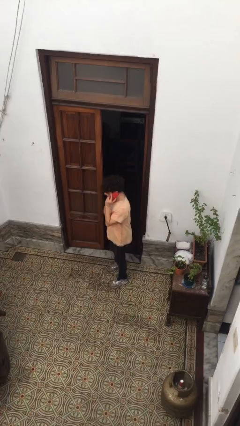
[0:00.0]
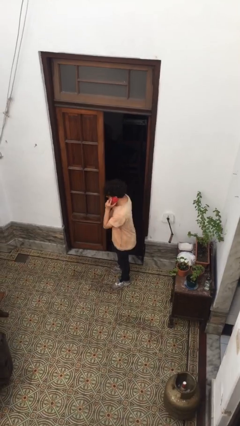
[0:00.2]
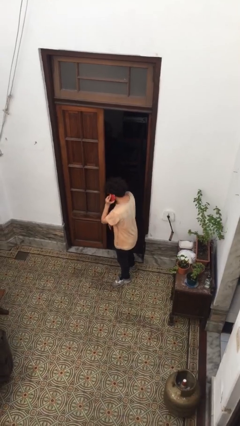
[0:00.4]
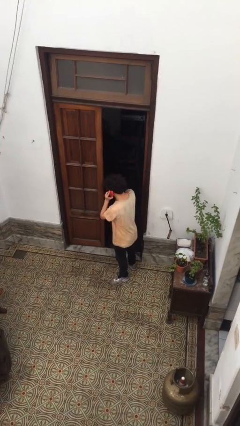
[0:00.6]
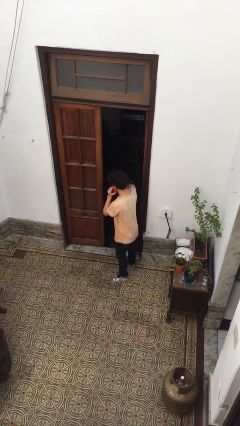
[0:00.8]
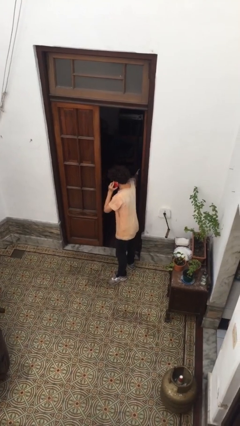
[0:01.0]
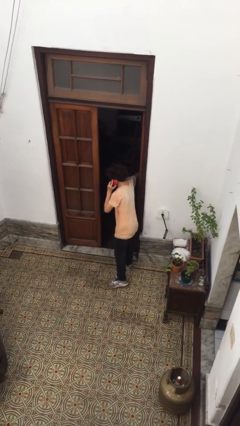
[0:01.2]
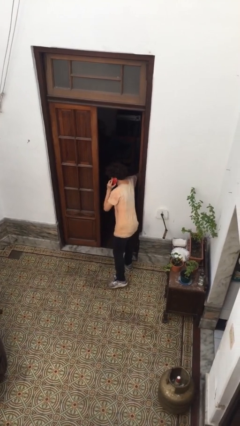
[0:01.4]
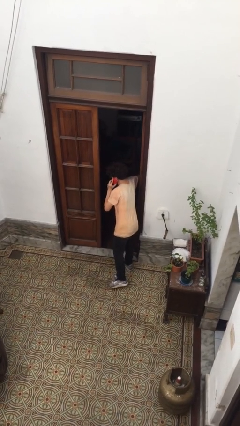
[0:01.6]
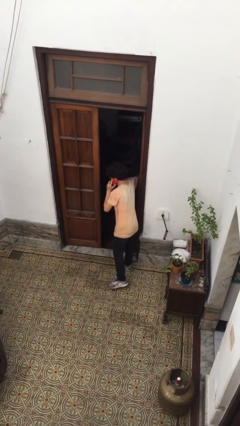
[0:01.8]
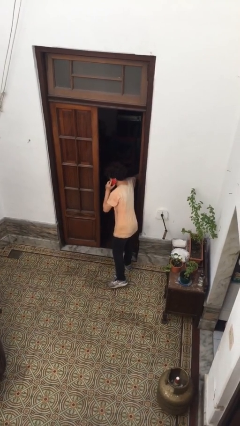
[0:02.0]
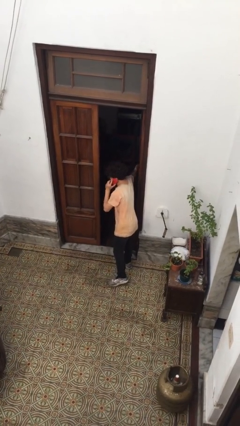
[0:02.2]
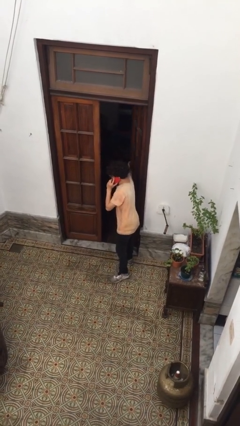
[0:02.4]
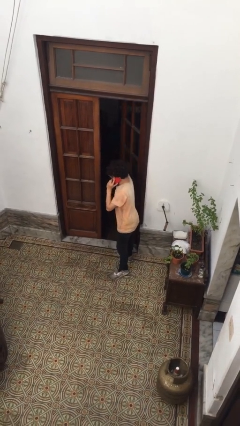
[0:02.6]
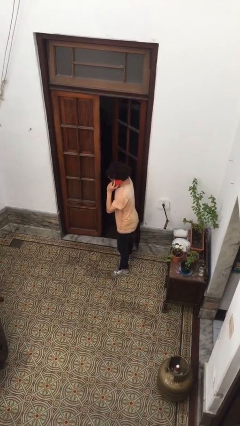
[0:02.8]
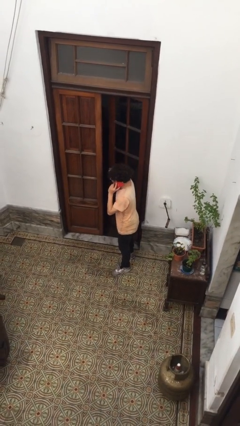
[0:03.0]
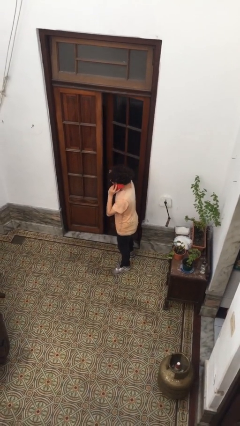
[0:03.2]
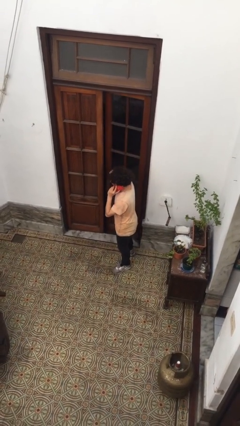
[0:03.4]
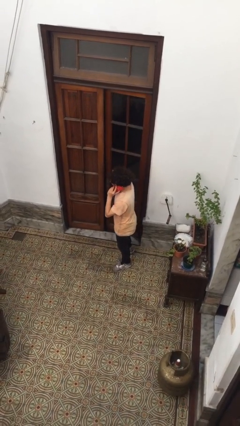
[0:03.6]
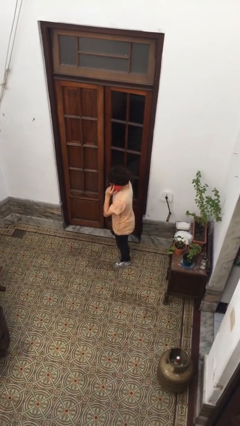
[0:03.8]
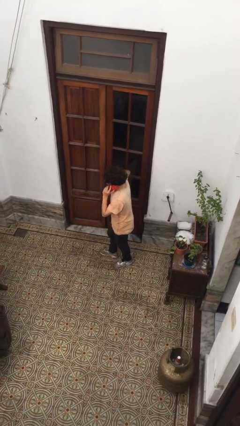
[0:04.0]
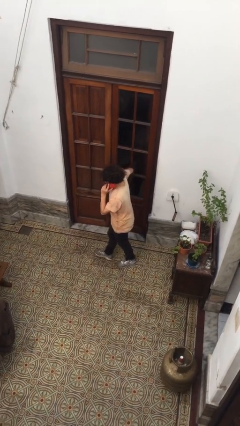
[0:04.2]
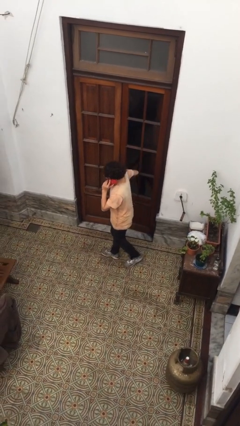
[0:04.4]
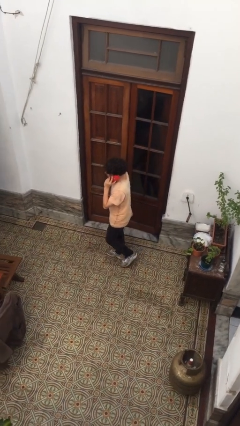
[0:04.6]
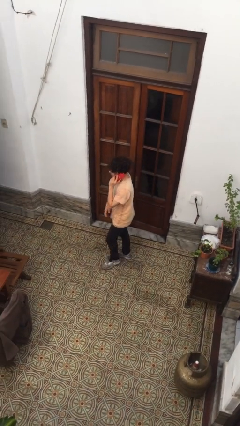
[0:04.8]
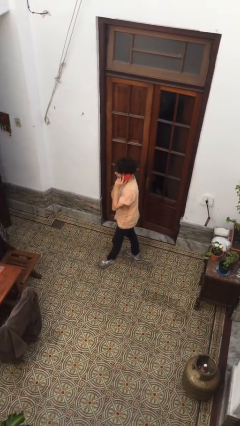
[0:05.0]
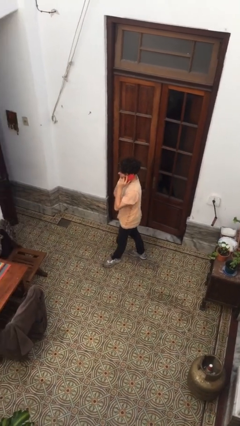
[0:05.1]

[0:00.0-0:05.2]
person closes facility door

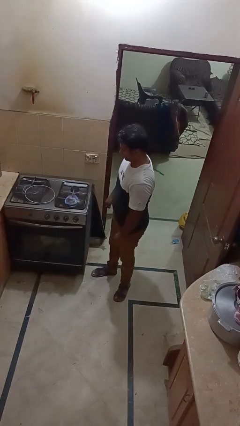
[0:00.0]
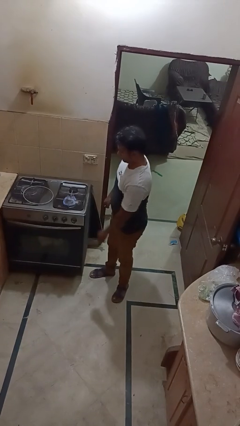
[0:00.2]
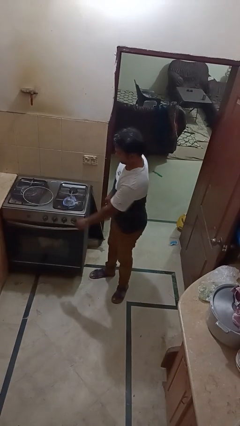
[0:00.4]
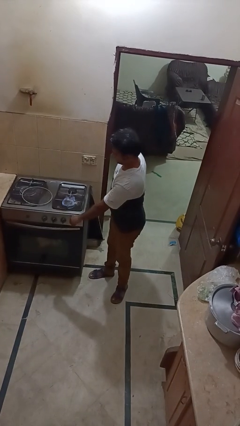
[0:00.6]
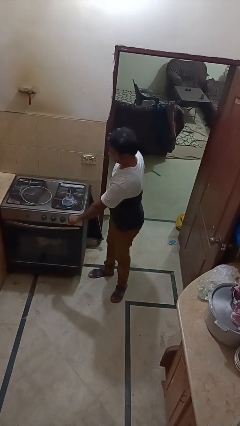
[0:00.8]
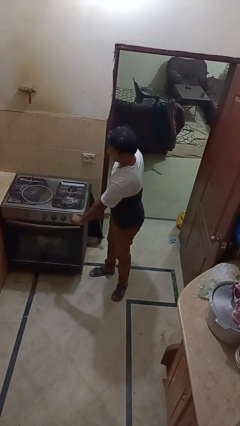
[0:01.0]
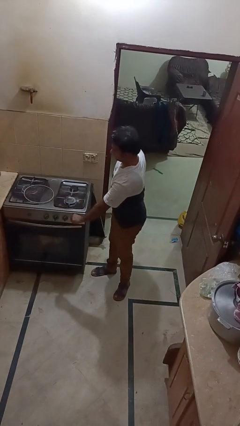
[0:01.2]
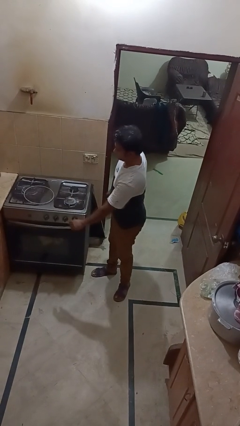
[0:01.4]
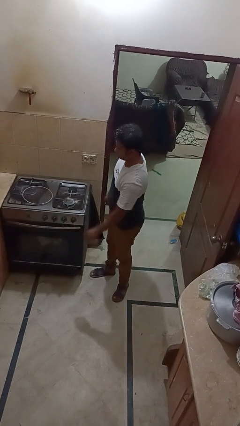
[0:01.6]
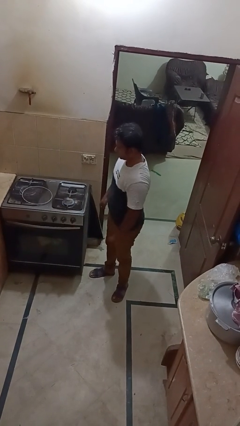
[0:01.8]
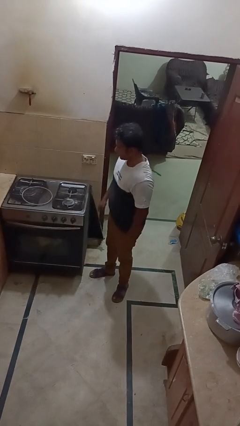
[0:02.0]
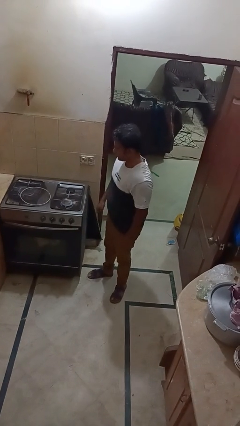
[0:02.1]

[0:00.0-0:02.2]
person turns off stovetop

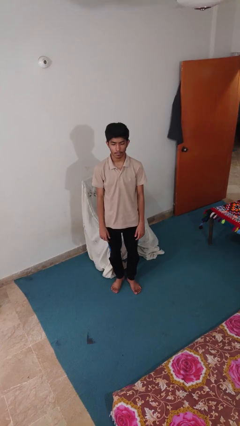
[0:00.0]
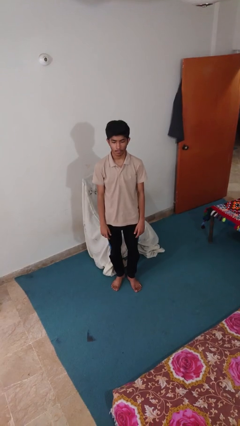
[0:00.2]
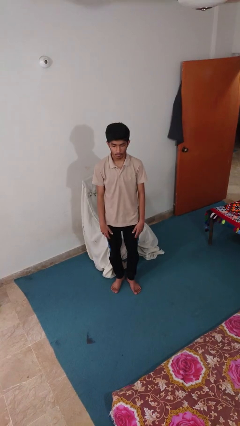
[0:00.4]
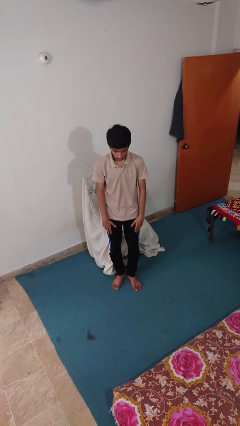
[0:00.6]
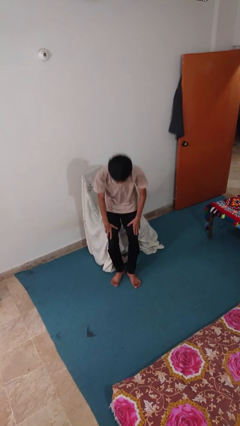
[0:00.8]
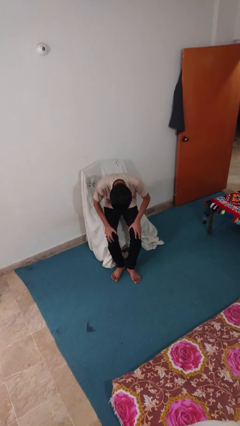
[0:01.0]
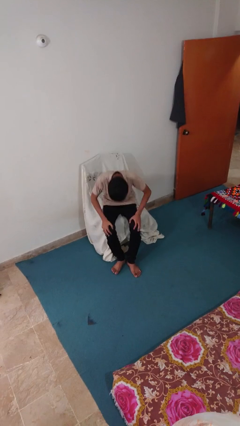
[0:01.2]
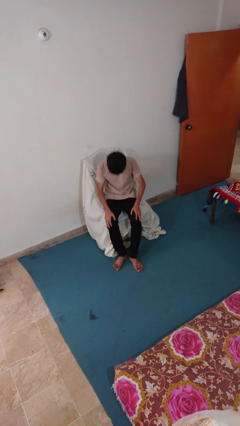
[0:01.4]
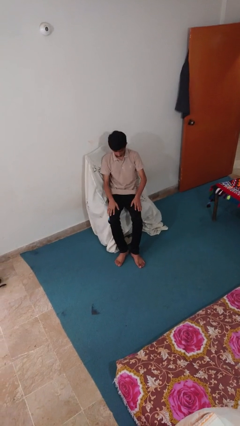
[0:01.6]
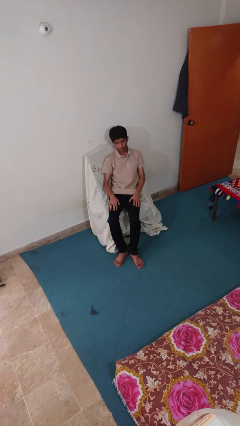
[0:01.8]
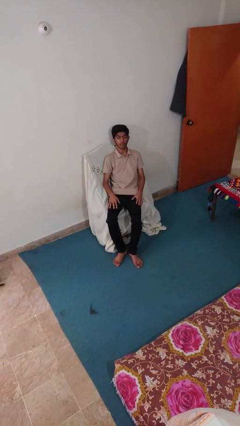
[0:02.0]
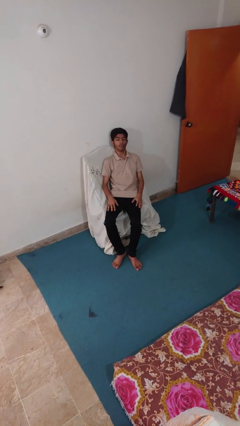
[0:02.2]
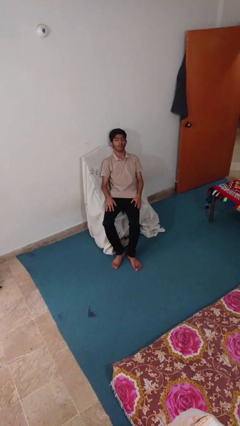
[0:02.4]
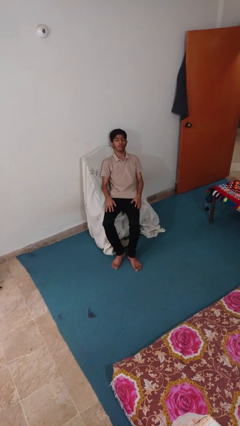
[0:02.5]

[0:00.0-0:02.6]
person lies down on couch

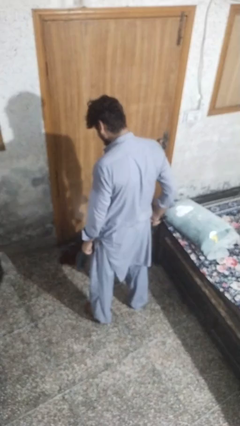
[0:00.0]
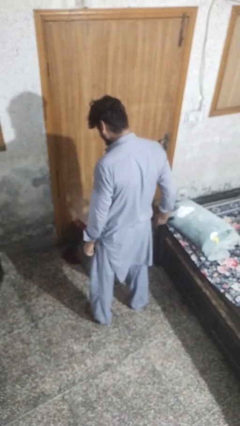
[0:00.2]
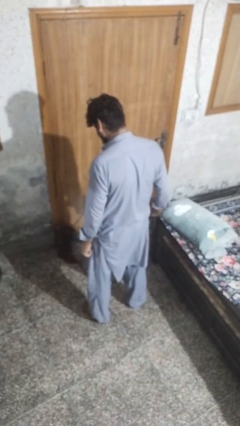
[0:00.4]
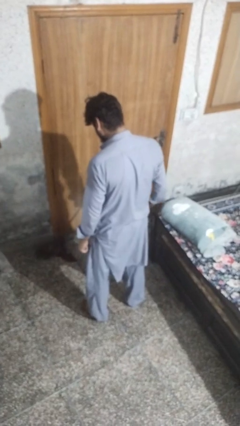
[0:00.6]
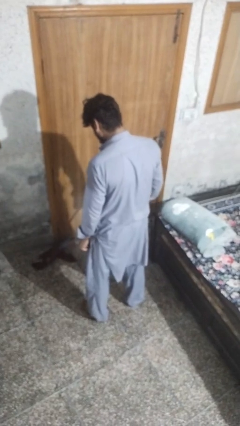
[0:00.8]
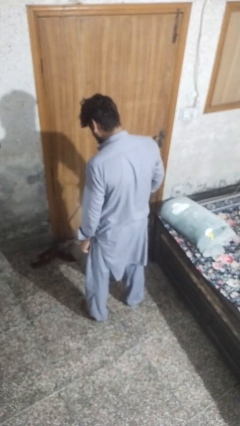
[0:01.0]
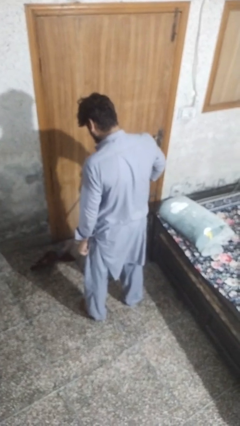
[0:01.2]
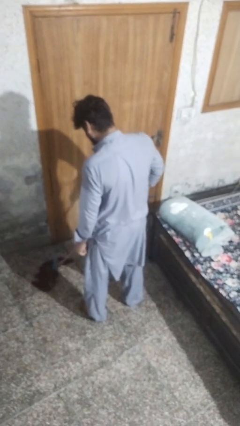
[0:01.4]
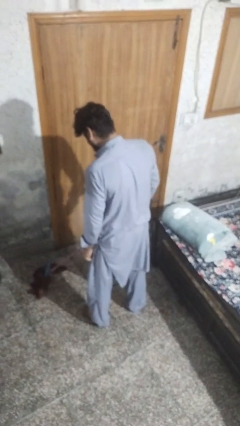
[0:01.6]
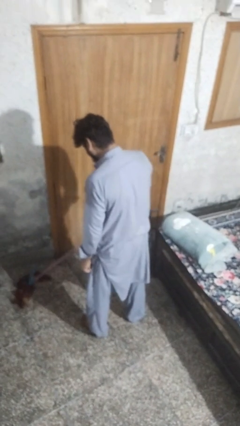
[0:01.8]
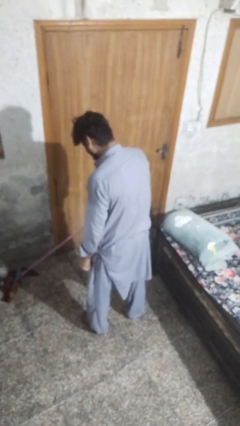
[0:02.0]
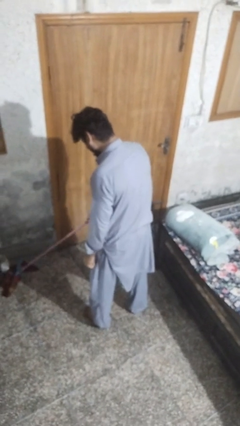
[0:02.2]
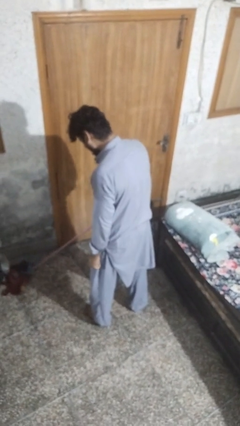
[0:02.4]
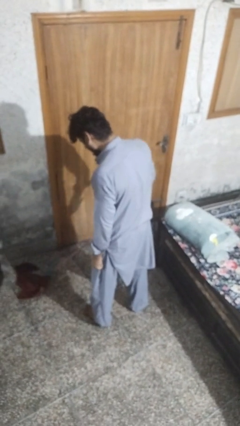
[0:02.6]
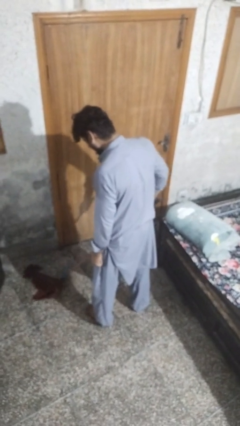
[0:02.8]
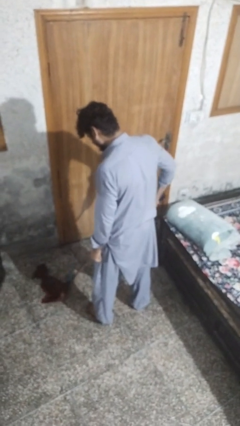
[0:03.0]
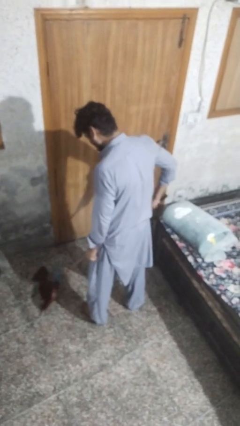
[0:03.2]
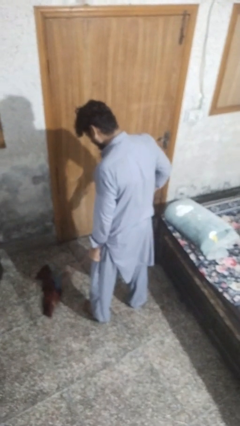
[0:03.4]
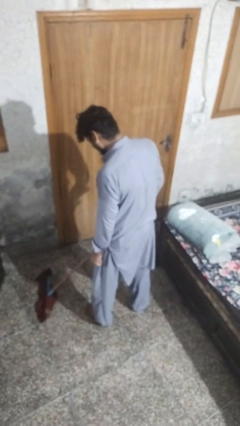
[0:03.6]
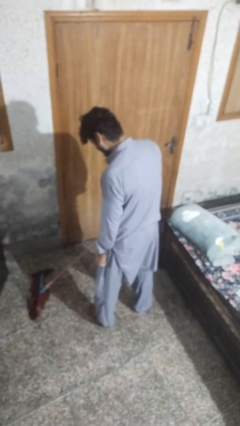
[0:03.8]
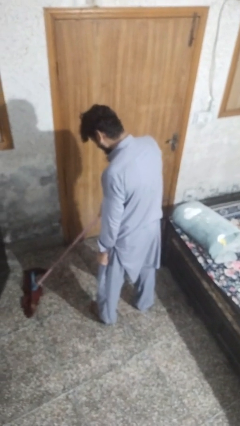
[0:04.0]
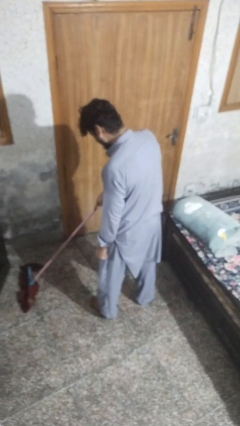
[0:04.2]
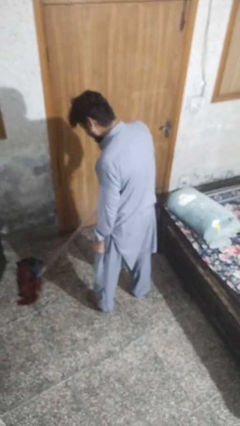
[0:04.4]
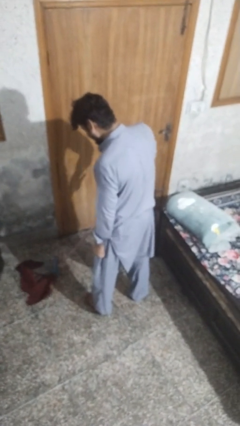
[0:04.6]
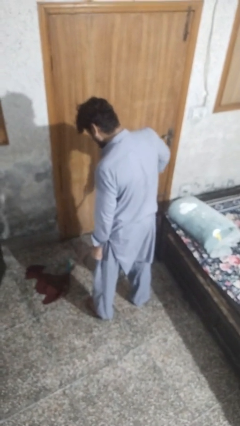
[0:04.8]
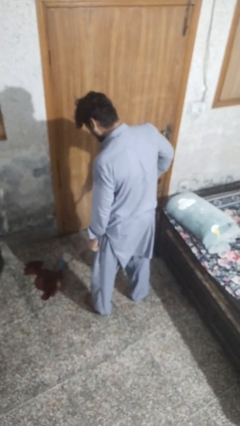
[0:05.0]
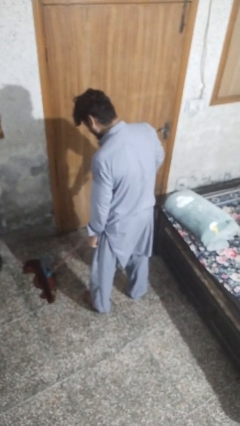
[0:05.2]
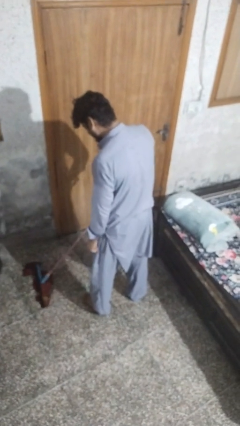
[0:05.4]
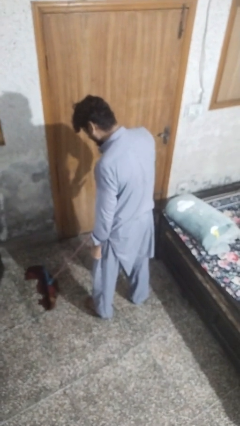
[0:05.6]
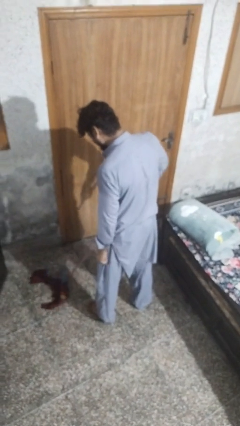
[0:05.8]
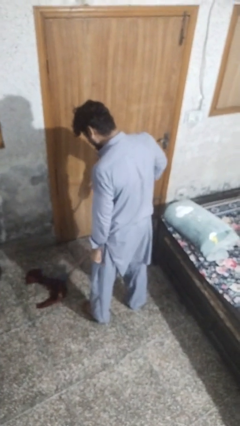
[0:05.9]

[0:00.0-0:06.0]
person mops

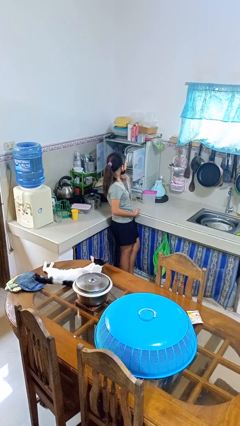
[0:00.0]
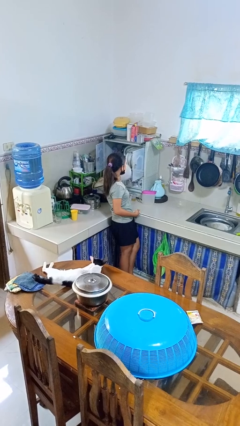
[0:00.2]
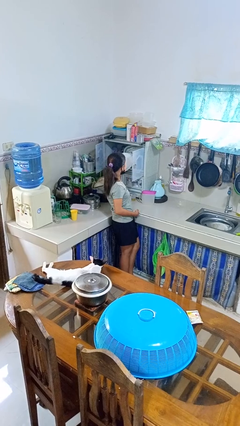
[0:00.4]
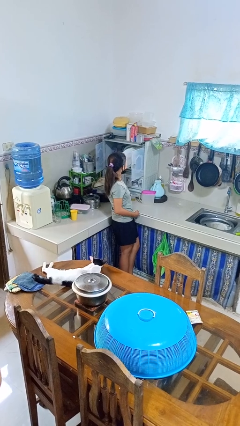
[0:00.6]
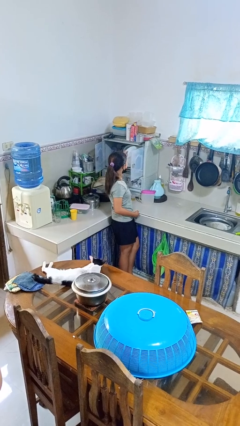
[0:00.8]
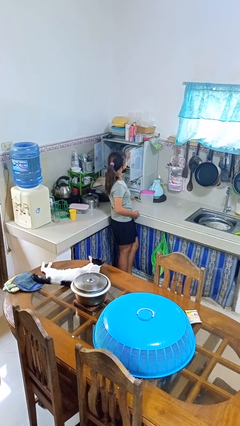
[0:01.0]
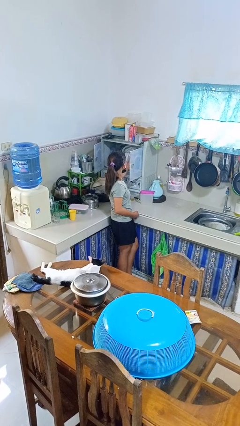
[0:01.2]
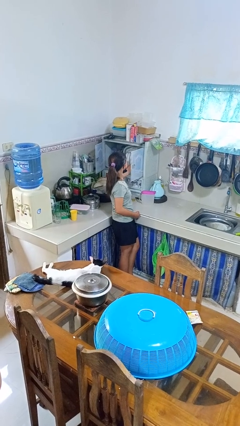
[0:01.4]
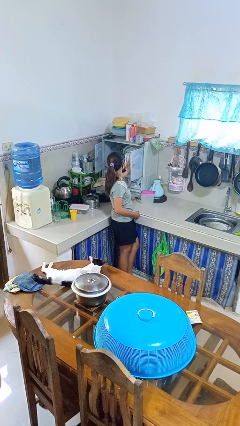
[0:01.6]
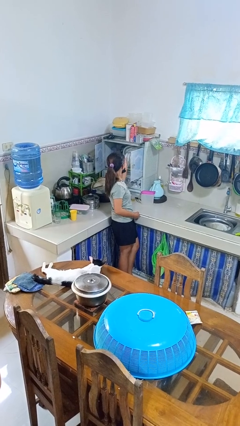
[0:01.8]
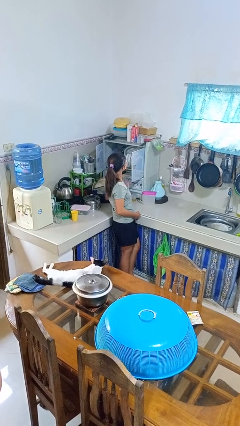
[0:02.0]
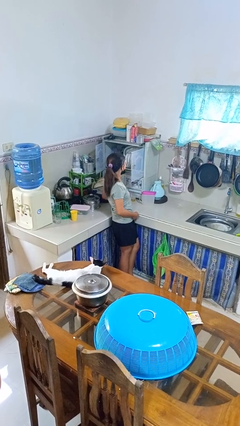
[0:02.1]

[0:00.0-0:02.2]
person puts object into kitchen drawer
